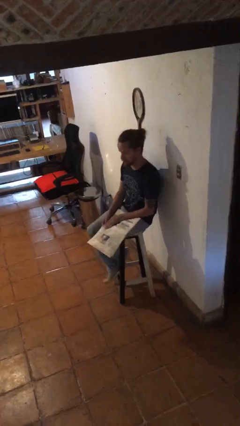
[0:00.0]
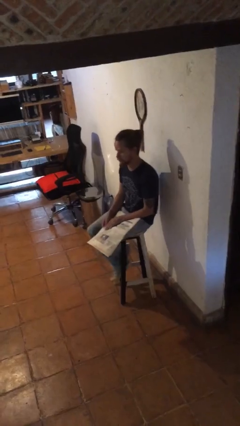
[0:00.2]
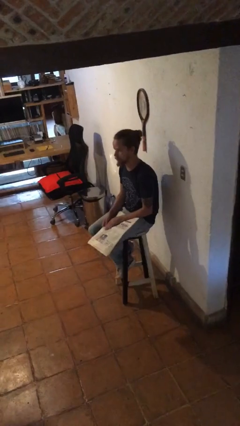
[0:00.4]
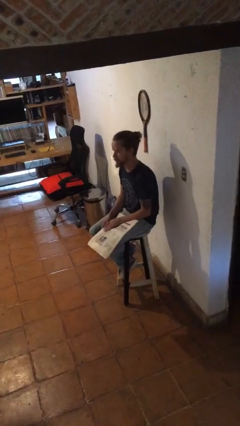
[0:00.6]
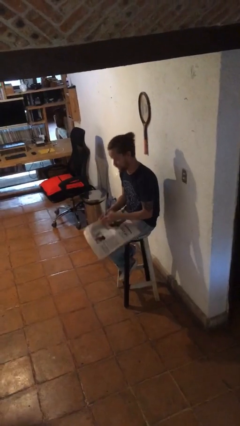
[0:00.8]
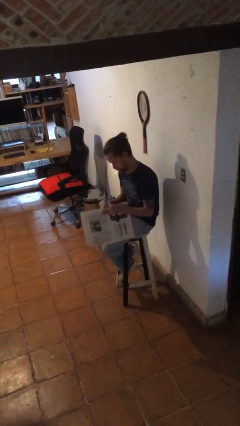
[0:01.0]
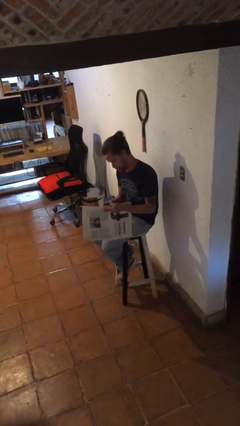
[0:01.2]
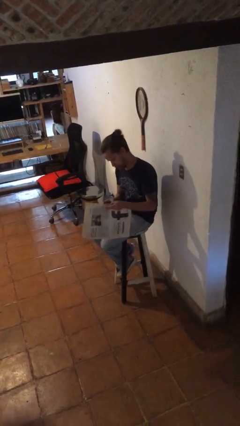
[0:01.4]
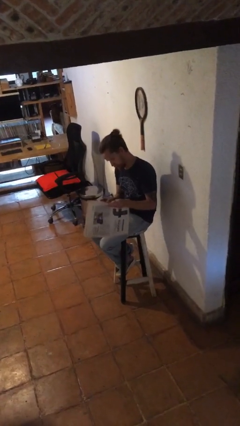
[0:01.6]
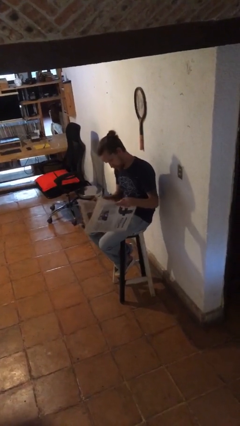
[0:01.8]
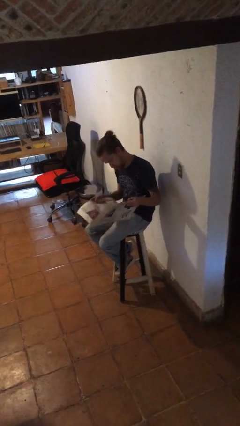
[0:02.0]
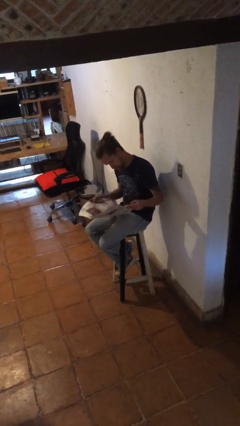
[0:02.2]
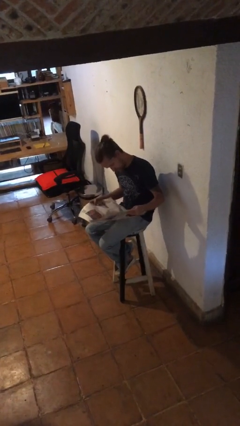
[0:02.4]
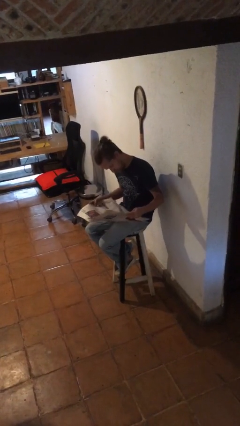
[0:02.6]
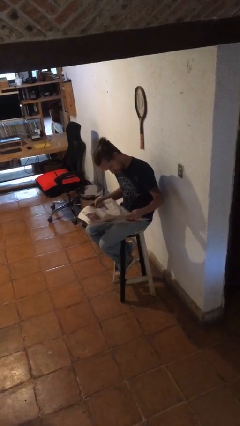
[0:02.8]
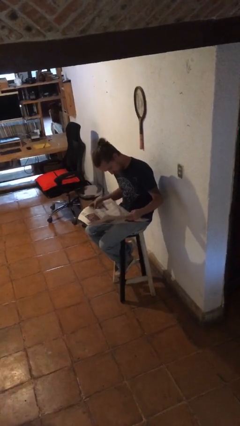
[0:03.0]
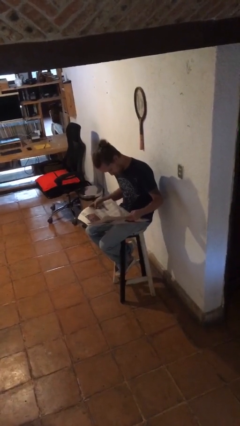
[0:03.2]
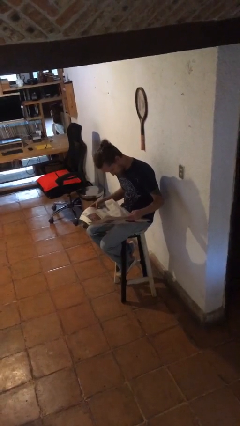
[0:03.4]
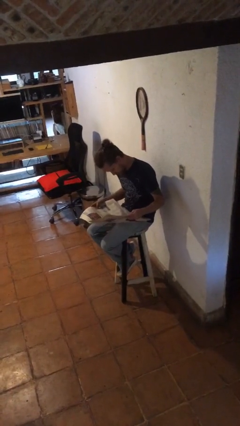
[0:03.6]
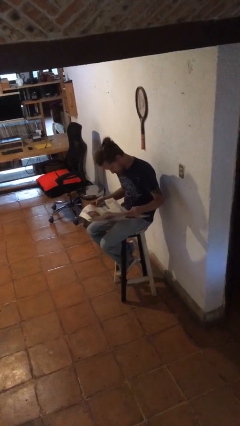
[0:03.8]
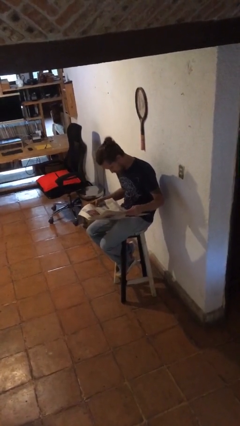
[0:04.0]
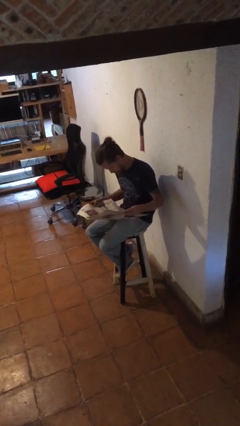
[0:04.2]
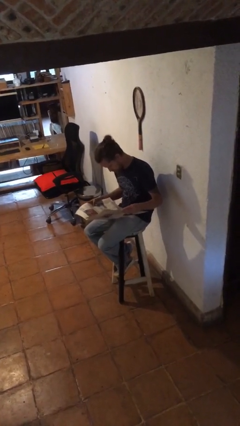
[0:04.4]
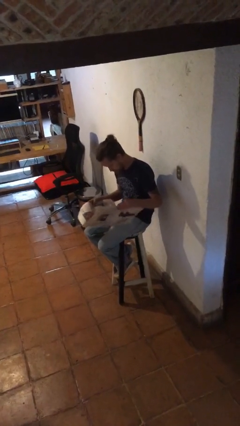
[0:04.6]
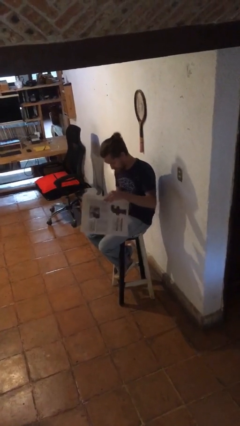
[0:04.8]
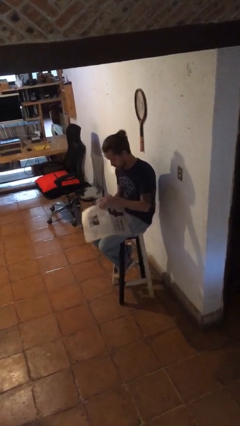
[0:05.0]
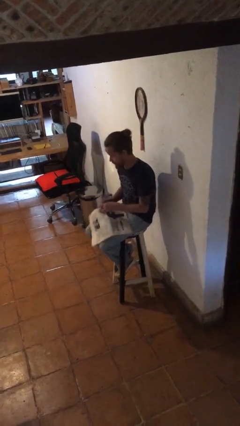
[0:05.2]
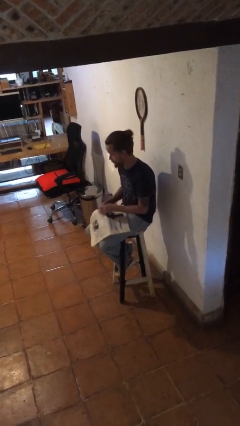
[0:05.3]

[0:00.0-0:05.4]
person reads newspaper

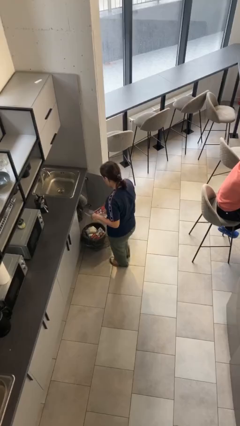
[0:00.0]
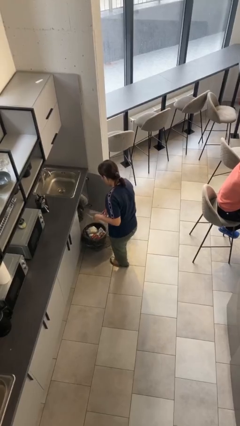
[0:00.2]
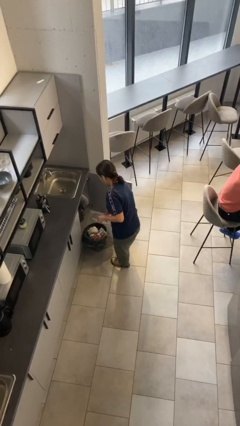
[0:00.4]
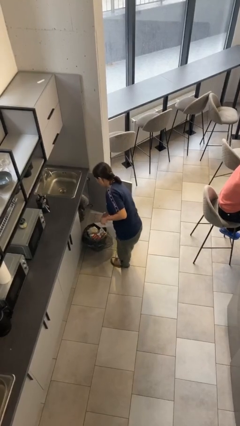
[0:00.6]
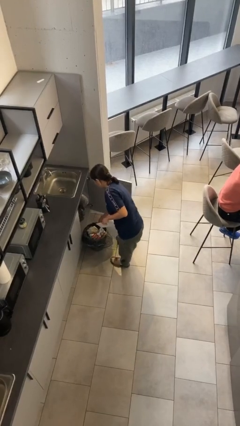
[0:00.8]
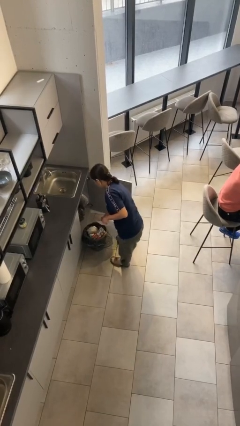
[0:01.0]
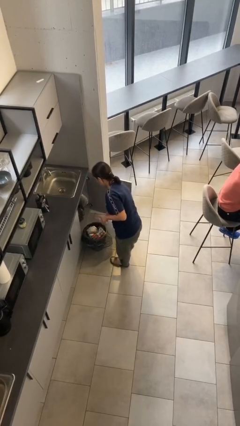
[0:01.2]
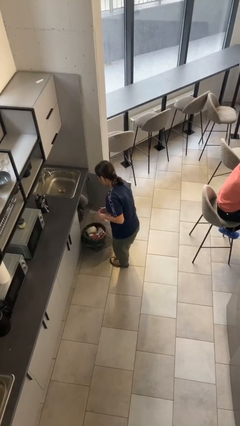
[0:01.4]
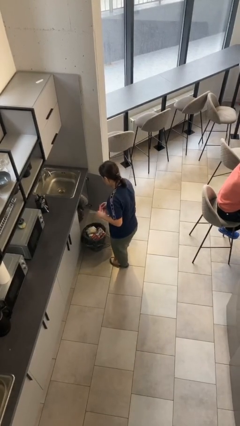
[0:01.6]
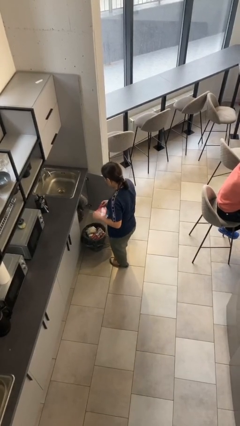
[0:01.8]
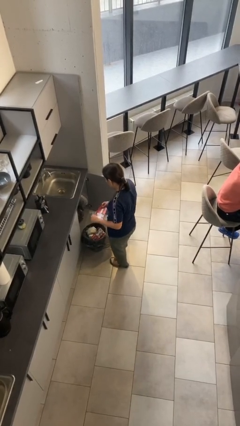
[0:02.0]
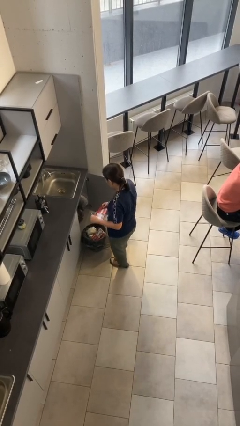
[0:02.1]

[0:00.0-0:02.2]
person discards trash

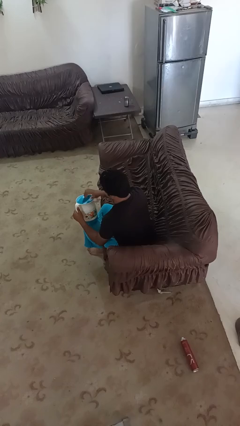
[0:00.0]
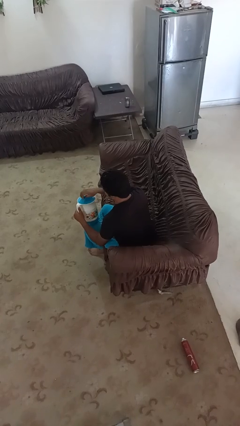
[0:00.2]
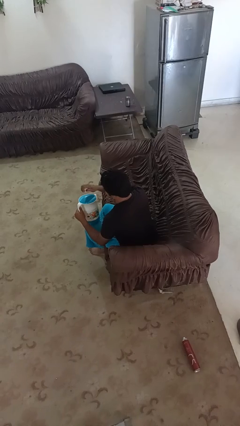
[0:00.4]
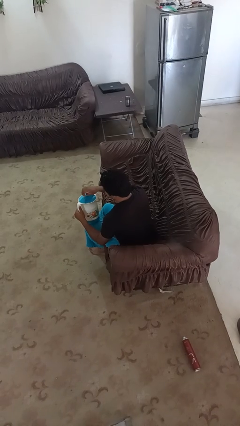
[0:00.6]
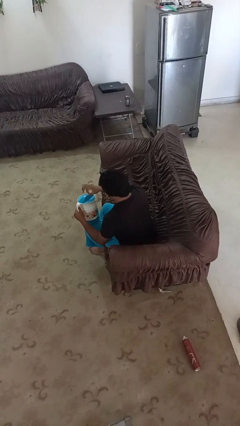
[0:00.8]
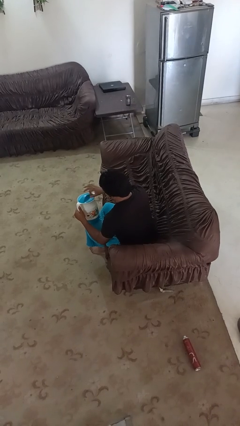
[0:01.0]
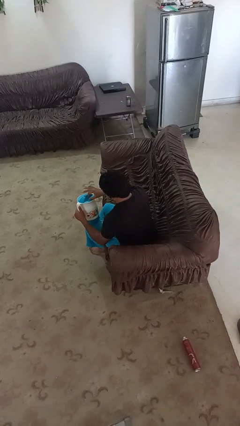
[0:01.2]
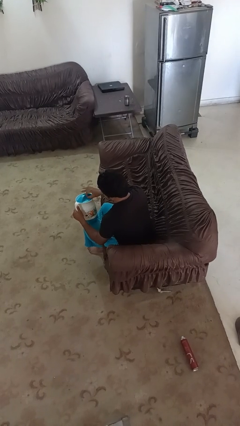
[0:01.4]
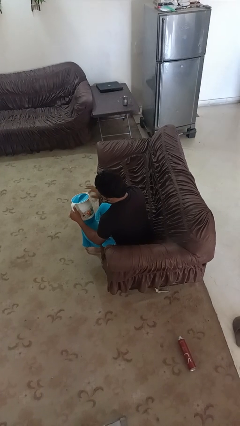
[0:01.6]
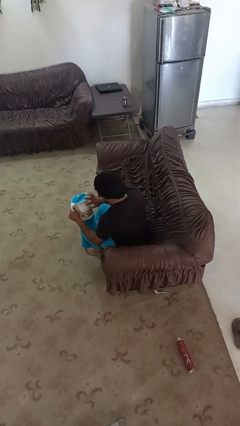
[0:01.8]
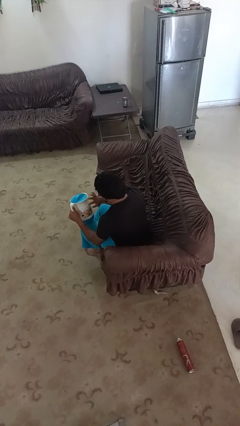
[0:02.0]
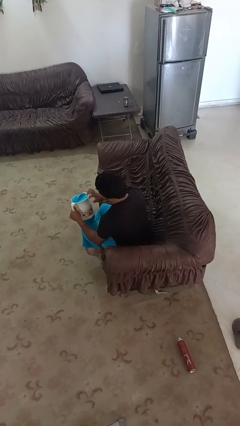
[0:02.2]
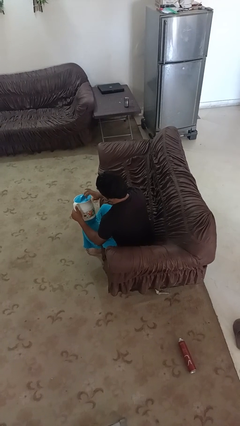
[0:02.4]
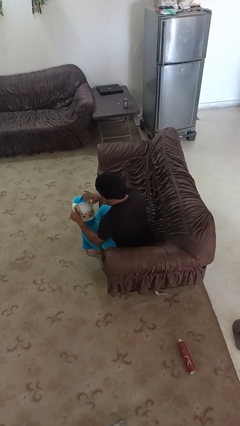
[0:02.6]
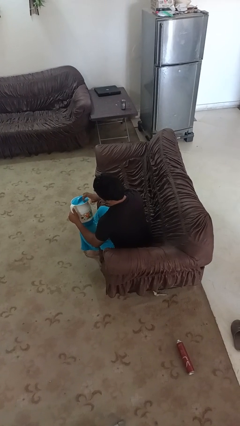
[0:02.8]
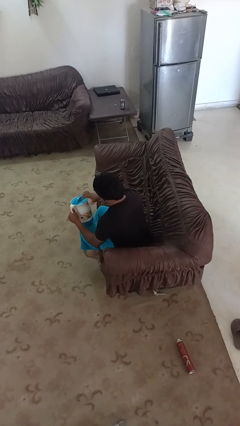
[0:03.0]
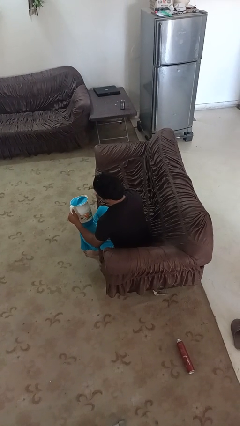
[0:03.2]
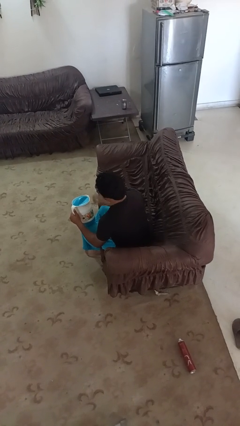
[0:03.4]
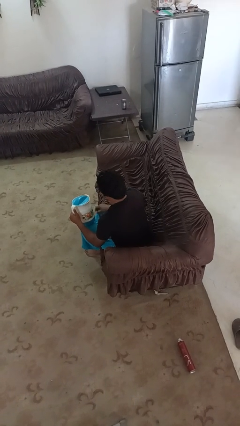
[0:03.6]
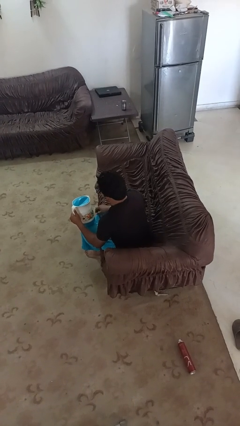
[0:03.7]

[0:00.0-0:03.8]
person taps object with finger

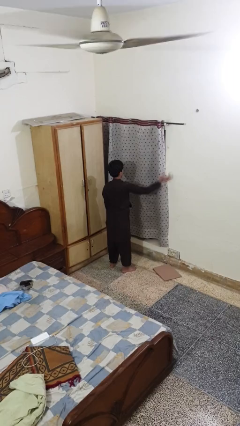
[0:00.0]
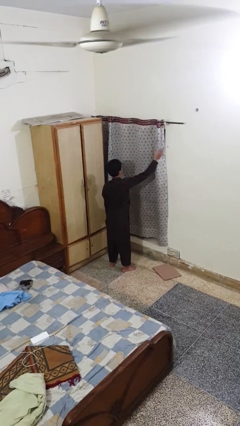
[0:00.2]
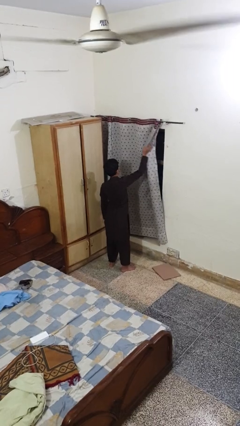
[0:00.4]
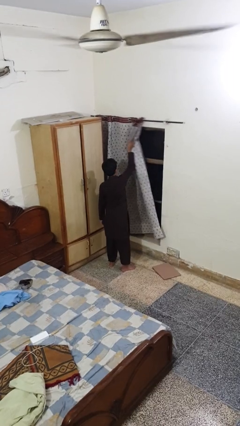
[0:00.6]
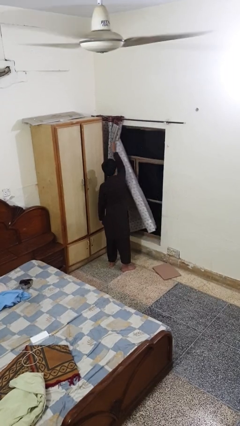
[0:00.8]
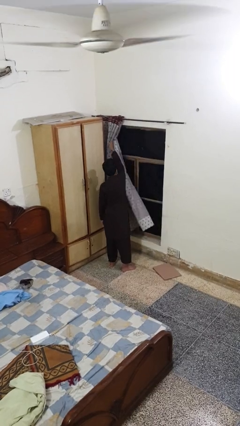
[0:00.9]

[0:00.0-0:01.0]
person opens curtains

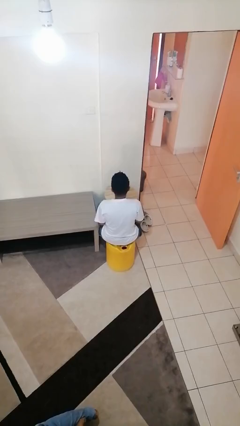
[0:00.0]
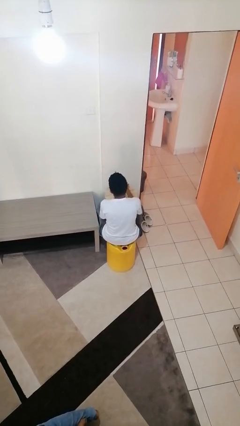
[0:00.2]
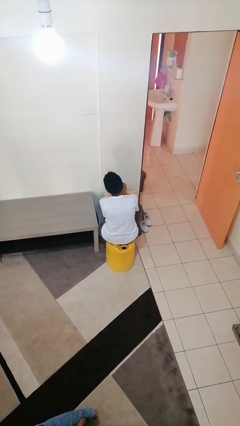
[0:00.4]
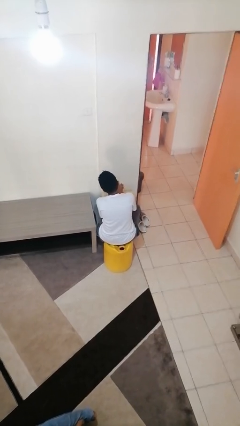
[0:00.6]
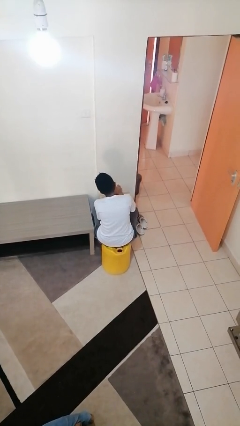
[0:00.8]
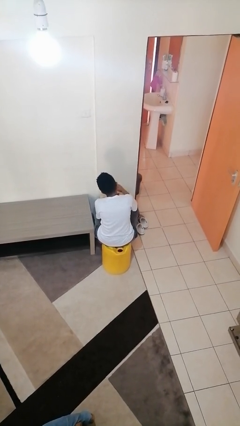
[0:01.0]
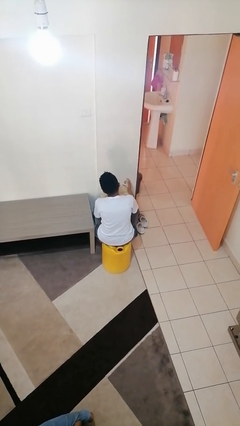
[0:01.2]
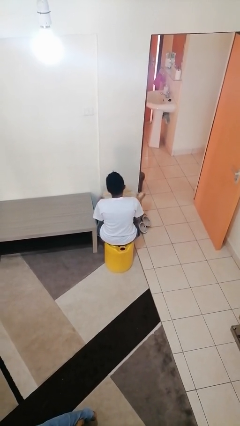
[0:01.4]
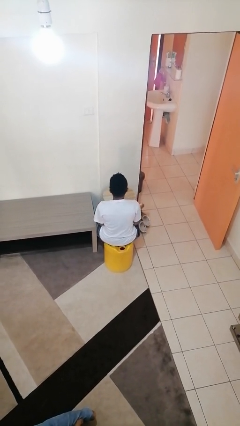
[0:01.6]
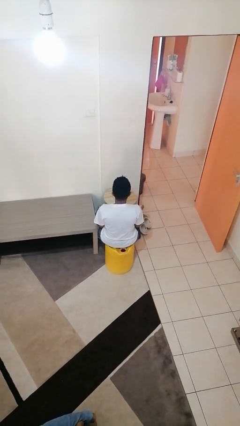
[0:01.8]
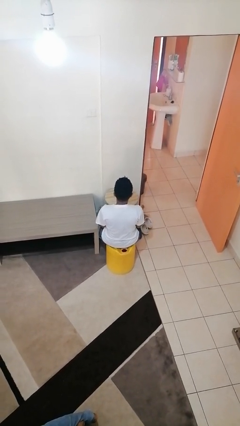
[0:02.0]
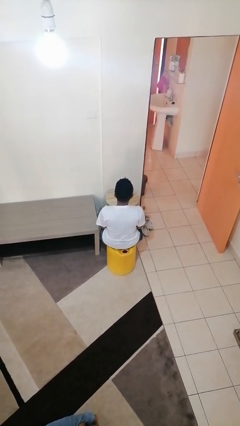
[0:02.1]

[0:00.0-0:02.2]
person opens jar

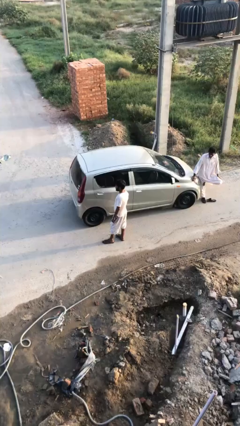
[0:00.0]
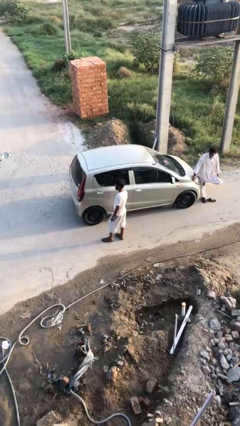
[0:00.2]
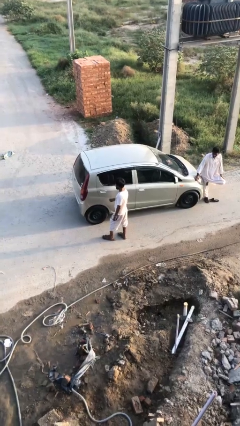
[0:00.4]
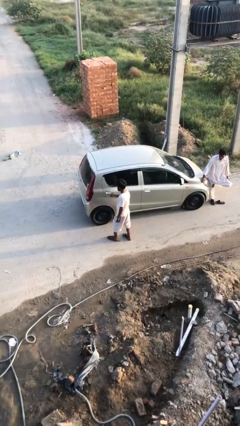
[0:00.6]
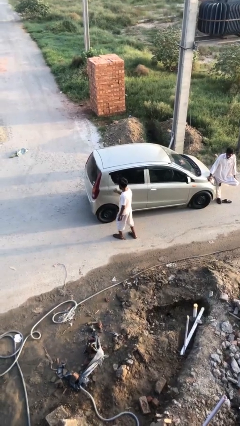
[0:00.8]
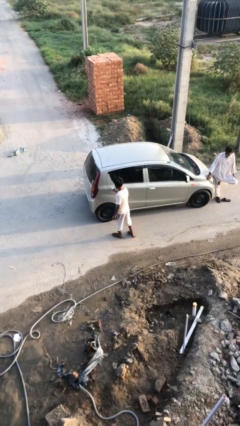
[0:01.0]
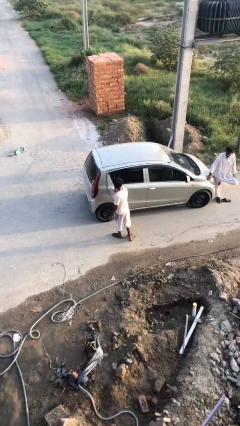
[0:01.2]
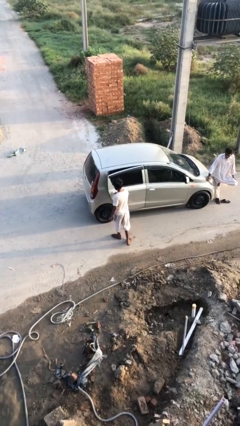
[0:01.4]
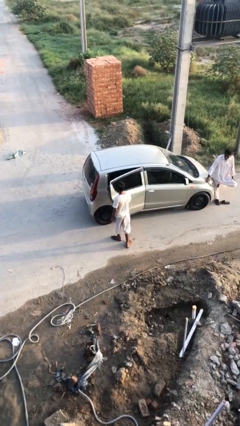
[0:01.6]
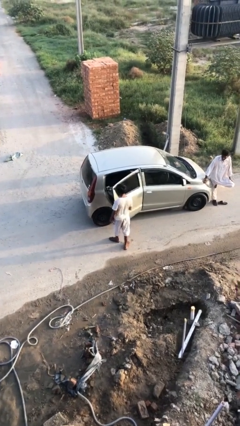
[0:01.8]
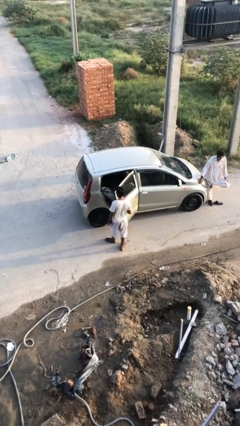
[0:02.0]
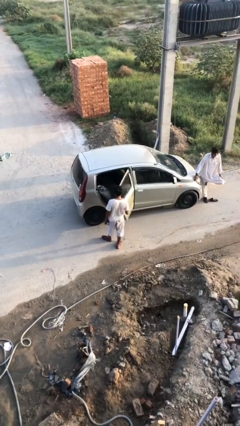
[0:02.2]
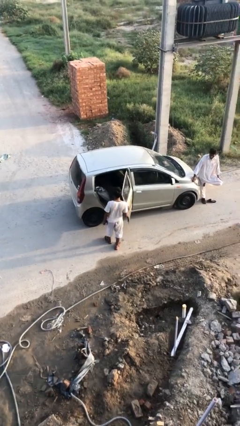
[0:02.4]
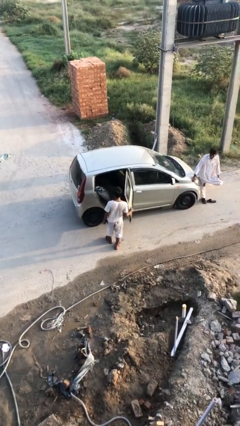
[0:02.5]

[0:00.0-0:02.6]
person opens car door
